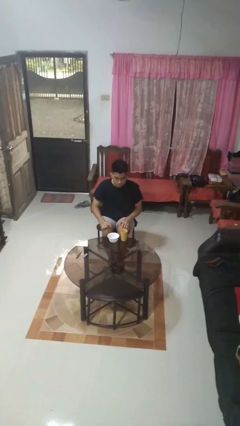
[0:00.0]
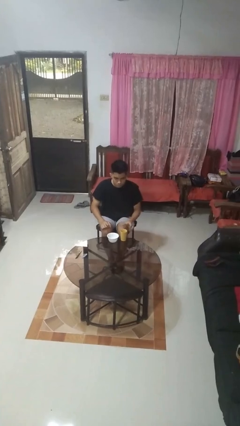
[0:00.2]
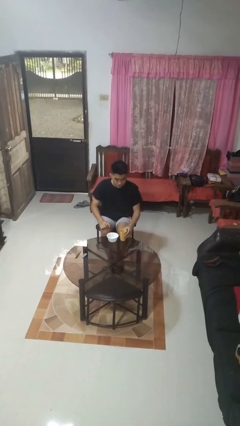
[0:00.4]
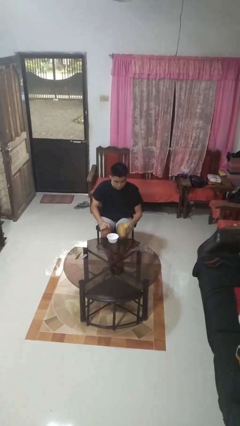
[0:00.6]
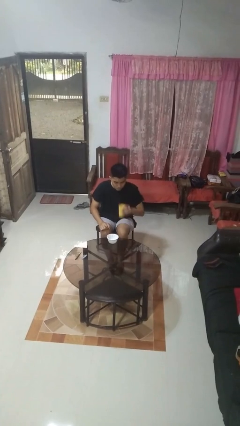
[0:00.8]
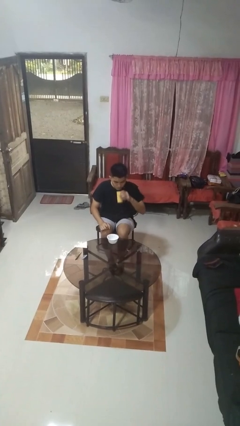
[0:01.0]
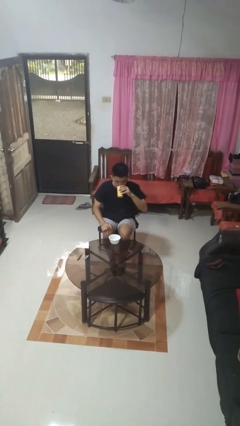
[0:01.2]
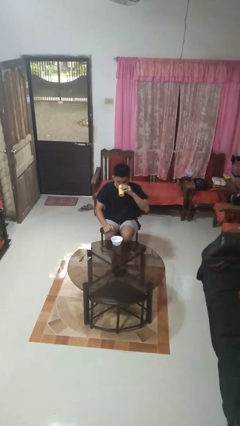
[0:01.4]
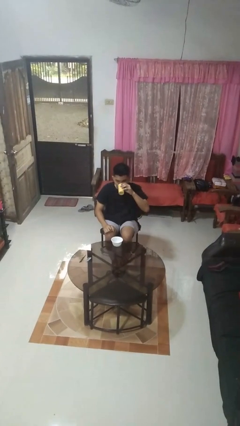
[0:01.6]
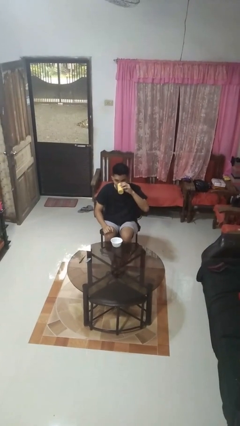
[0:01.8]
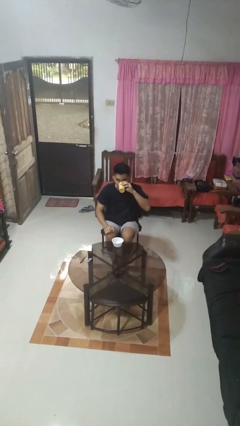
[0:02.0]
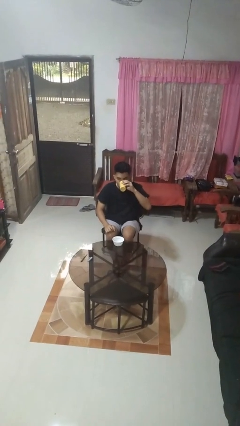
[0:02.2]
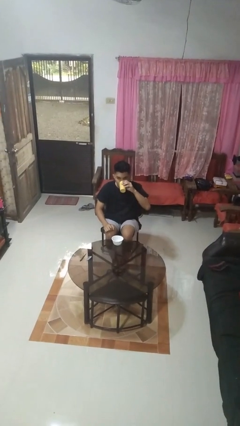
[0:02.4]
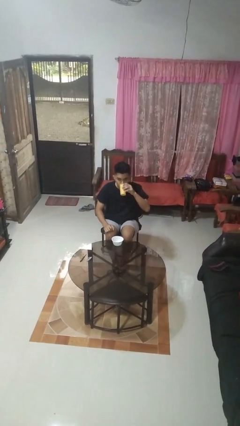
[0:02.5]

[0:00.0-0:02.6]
person drinks from cup

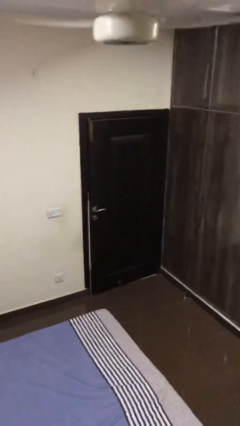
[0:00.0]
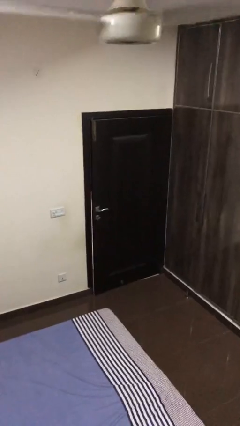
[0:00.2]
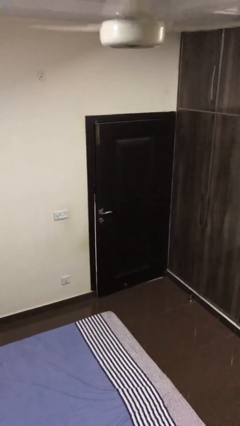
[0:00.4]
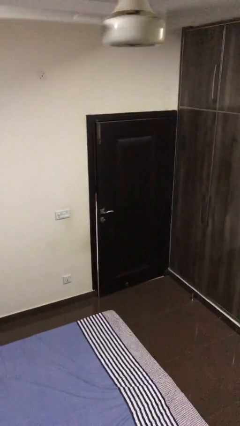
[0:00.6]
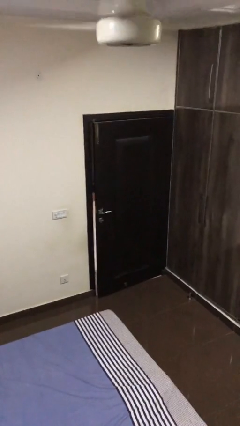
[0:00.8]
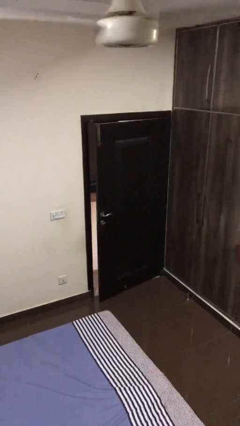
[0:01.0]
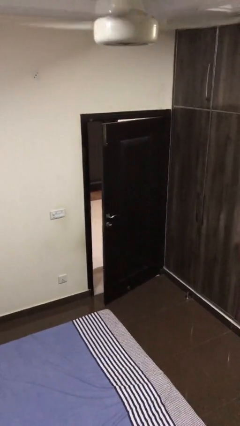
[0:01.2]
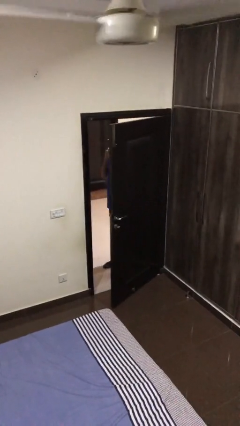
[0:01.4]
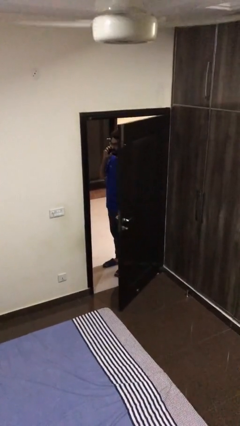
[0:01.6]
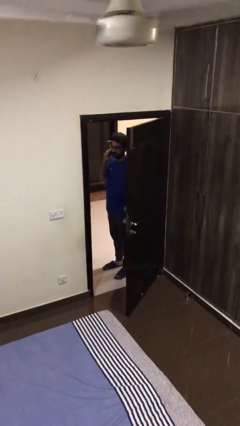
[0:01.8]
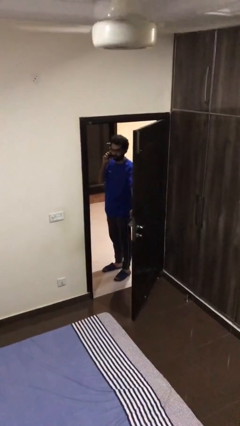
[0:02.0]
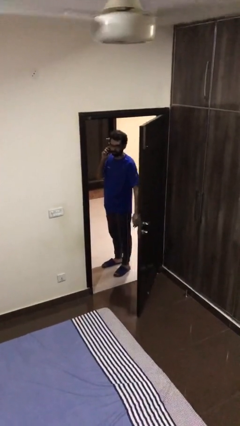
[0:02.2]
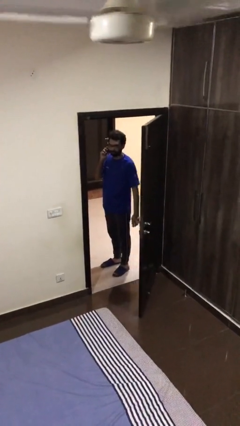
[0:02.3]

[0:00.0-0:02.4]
person opens facility door

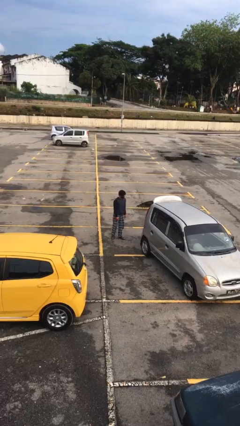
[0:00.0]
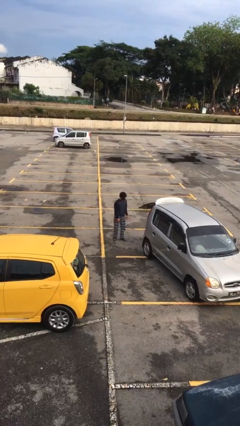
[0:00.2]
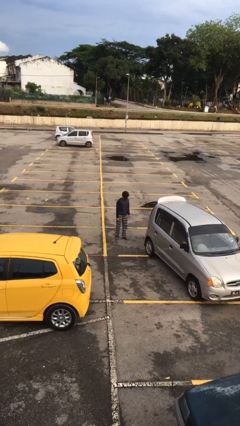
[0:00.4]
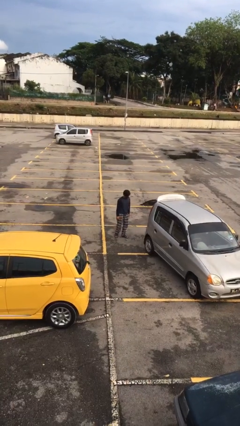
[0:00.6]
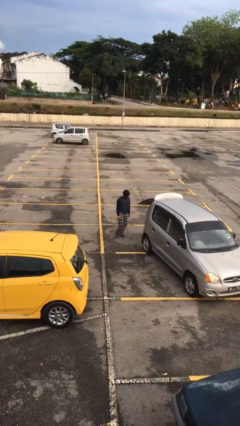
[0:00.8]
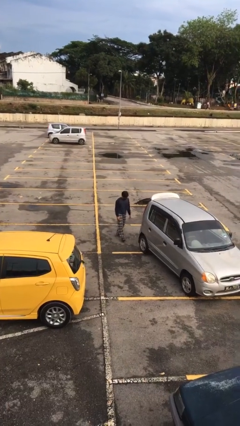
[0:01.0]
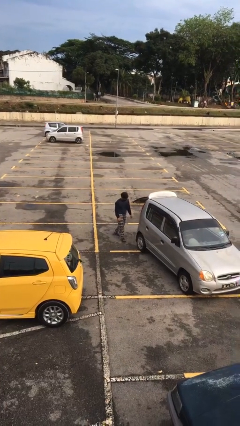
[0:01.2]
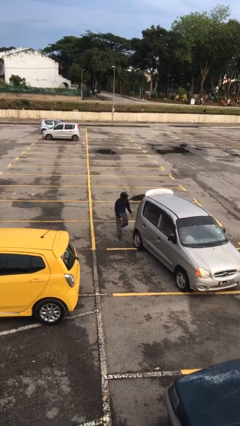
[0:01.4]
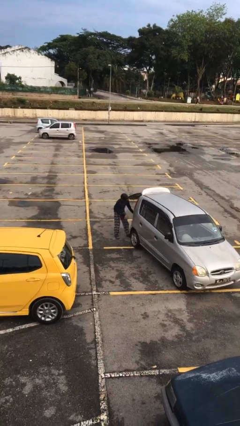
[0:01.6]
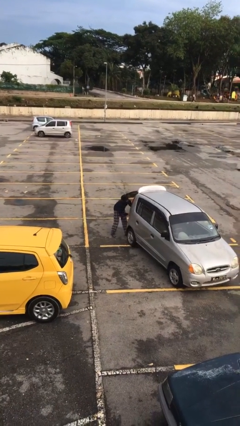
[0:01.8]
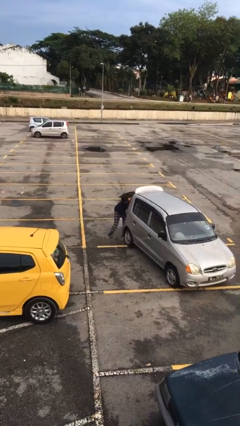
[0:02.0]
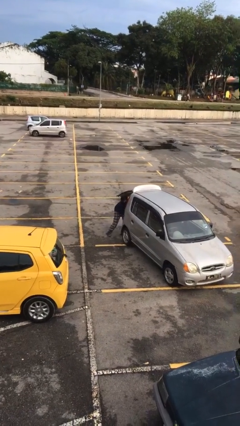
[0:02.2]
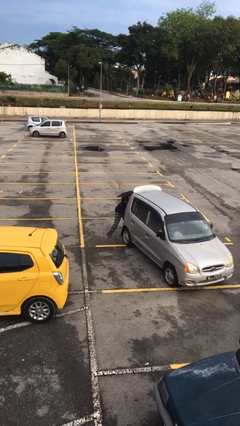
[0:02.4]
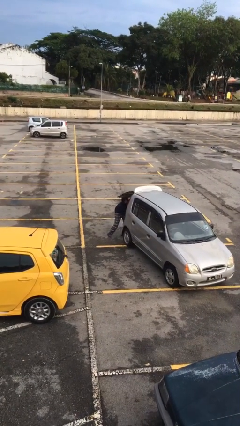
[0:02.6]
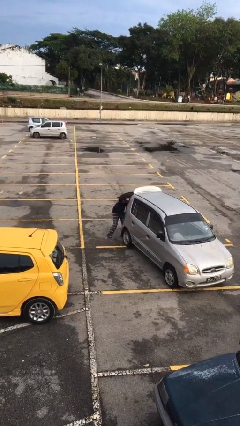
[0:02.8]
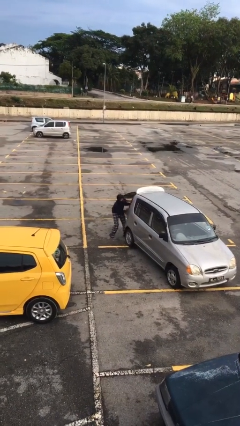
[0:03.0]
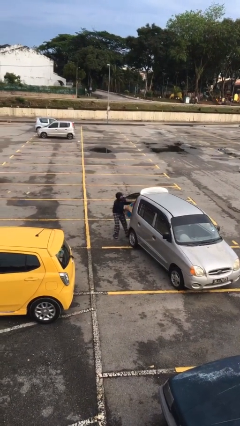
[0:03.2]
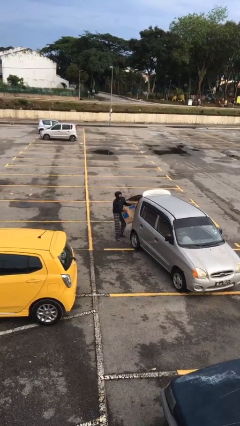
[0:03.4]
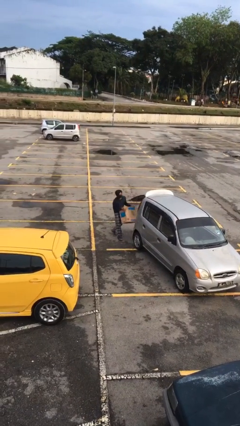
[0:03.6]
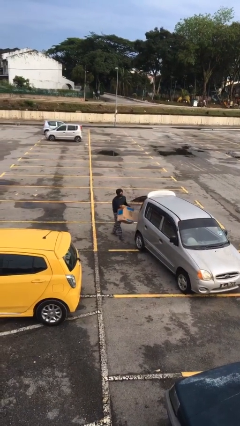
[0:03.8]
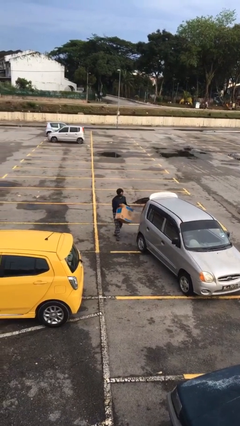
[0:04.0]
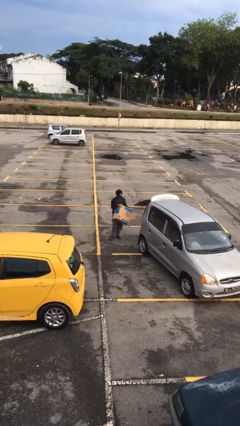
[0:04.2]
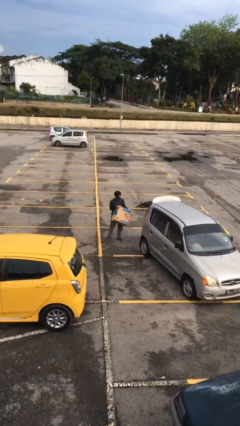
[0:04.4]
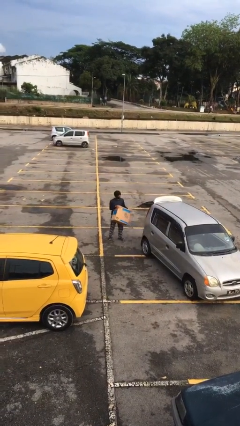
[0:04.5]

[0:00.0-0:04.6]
person unloads car

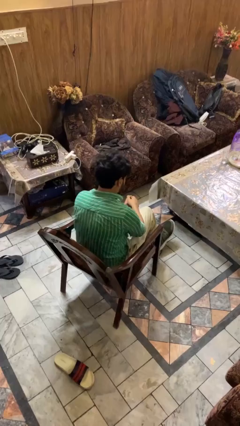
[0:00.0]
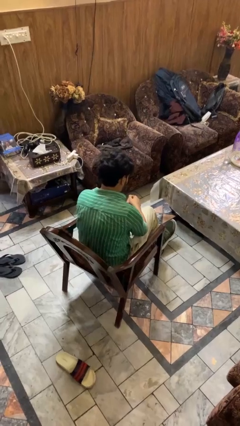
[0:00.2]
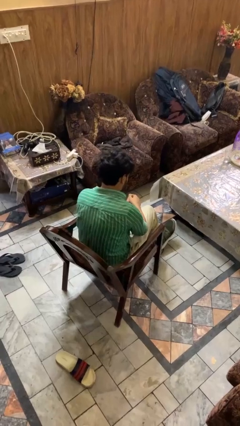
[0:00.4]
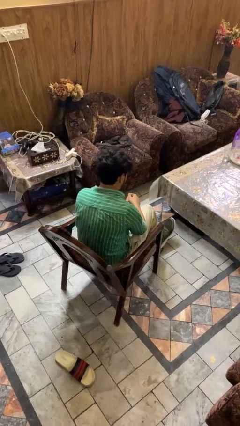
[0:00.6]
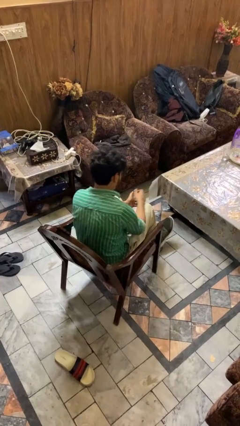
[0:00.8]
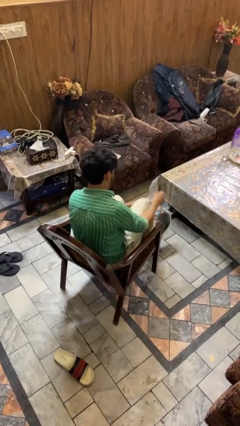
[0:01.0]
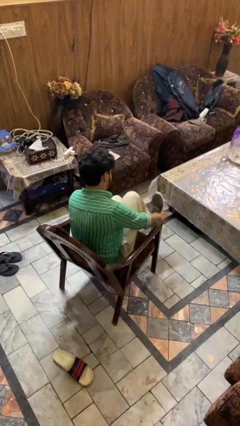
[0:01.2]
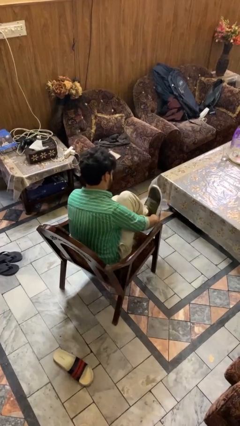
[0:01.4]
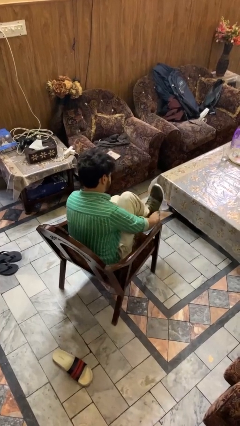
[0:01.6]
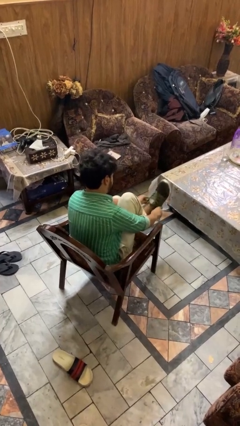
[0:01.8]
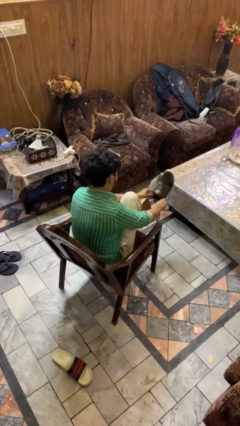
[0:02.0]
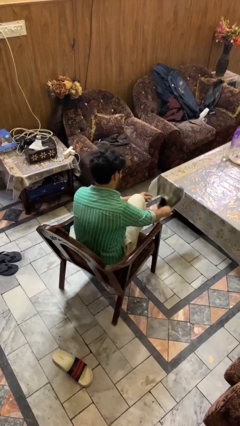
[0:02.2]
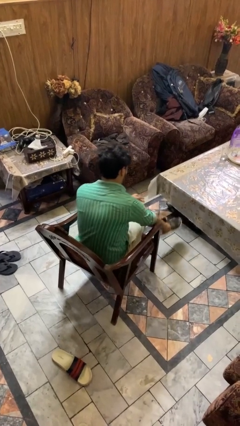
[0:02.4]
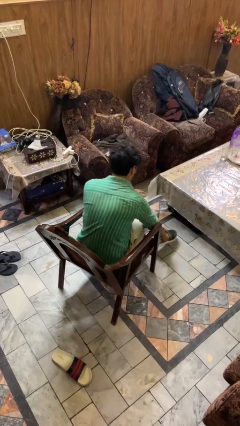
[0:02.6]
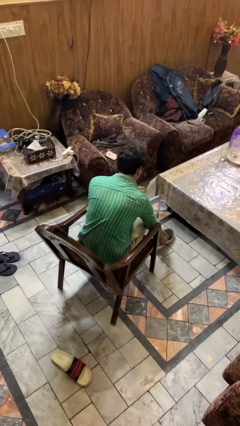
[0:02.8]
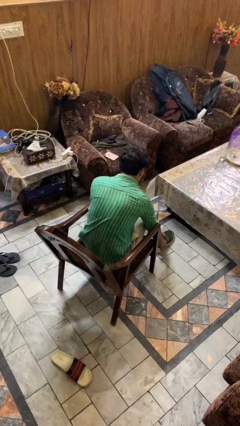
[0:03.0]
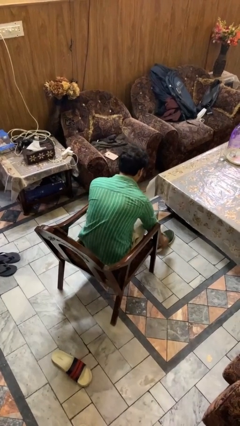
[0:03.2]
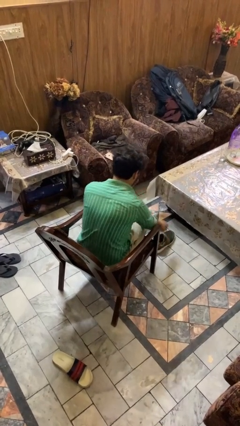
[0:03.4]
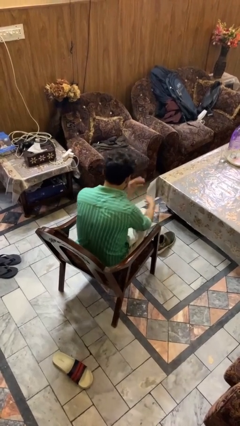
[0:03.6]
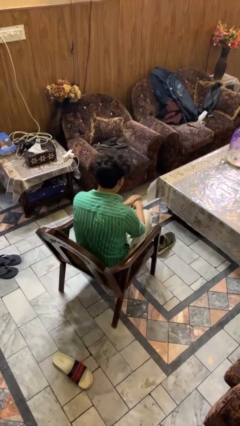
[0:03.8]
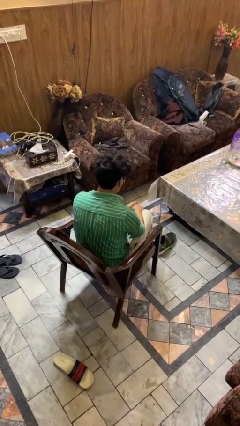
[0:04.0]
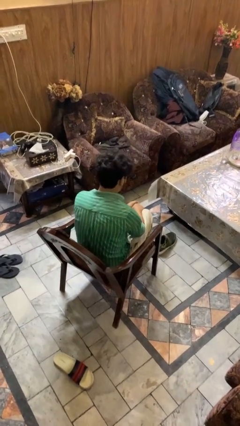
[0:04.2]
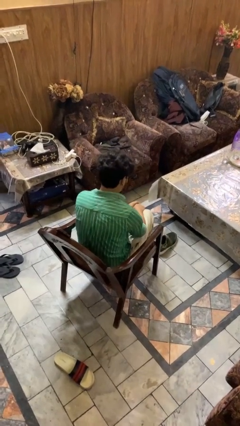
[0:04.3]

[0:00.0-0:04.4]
person takes off shoes

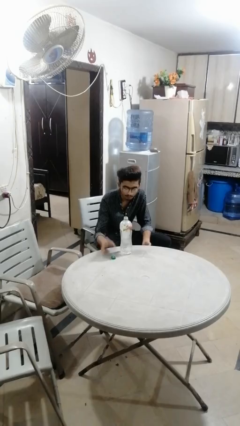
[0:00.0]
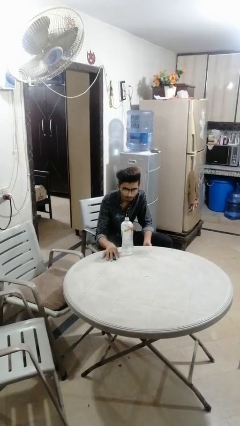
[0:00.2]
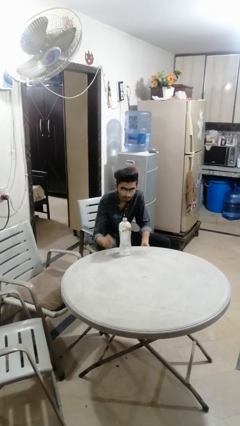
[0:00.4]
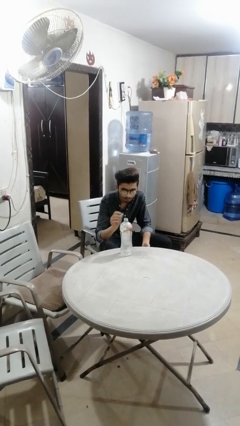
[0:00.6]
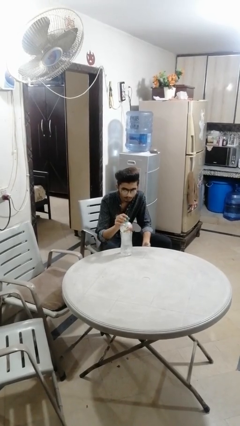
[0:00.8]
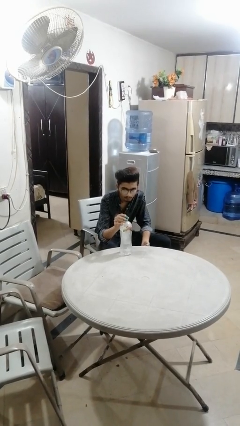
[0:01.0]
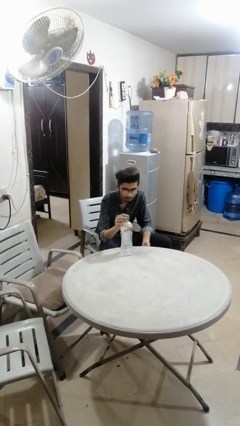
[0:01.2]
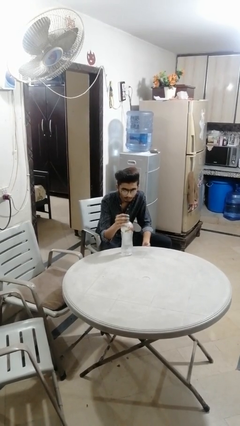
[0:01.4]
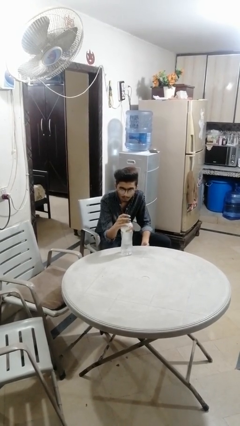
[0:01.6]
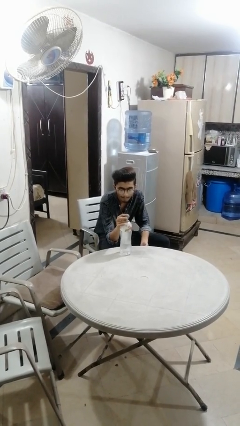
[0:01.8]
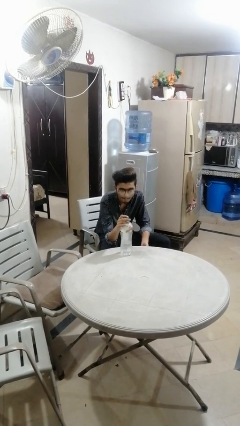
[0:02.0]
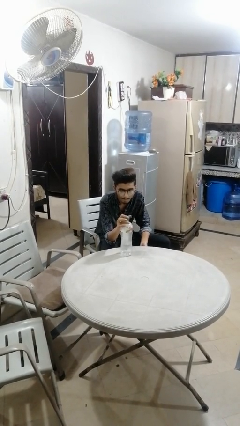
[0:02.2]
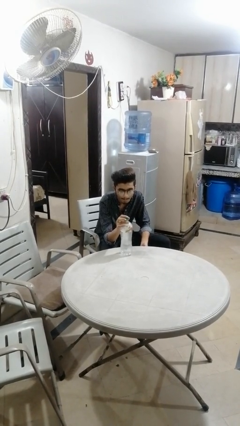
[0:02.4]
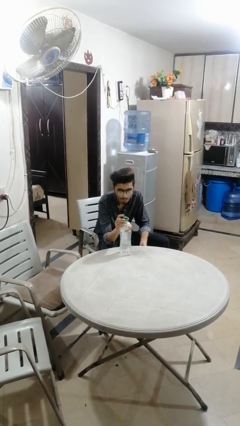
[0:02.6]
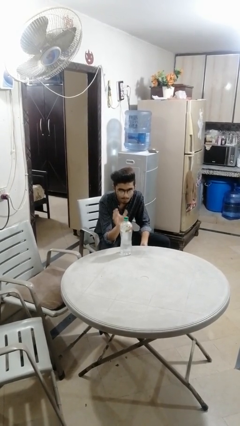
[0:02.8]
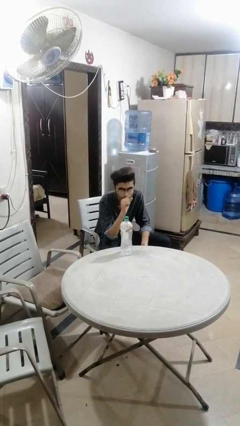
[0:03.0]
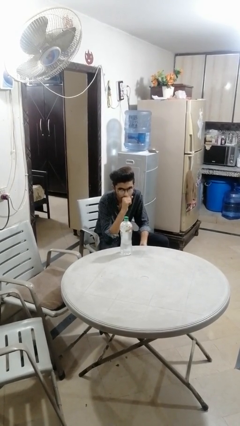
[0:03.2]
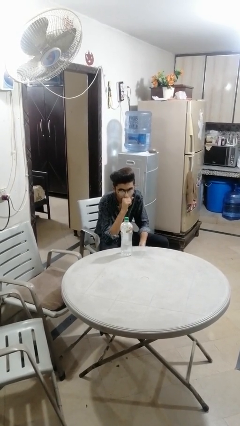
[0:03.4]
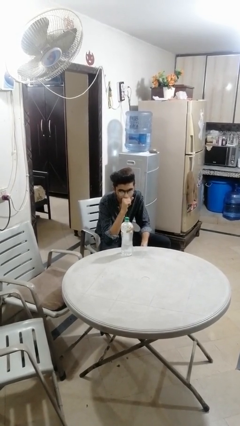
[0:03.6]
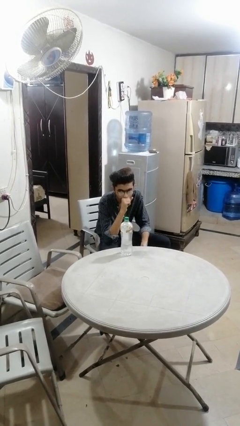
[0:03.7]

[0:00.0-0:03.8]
person screws lid to bottle
